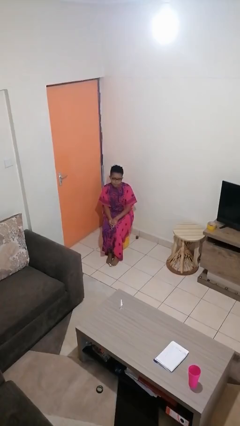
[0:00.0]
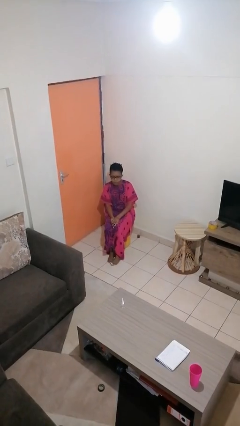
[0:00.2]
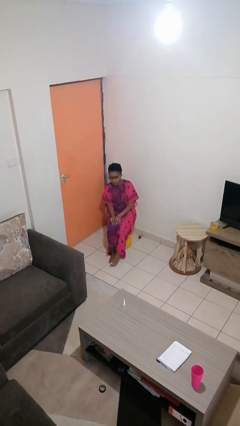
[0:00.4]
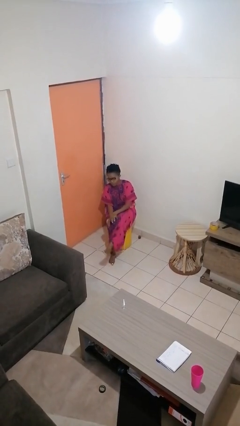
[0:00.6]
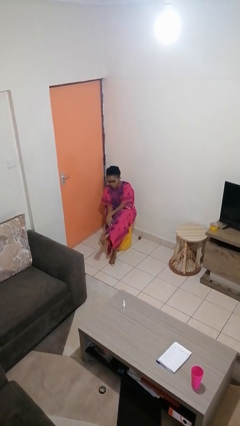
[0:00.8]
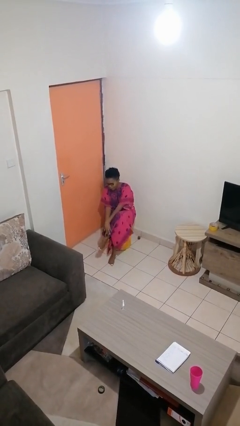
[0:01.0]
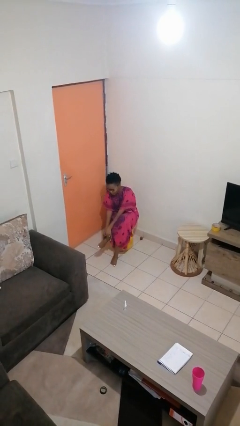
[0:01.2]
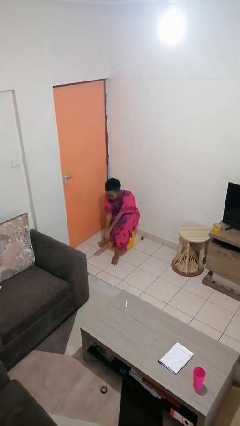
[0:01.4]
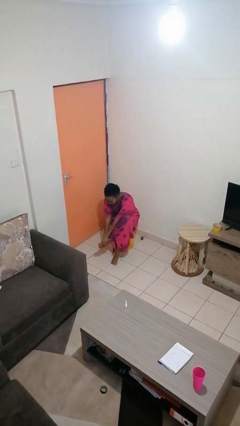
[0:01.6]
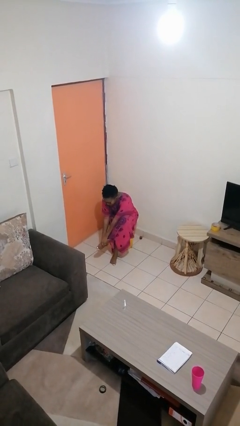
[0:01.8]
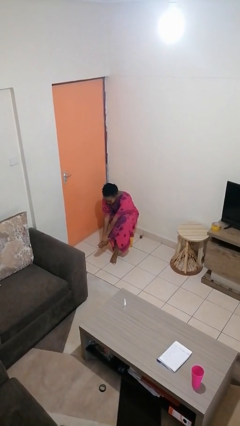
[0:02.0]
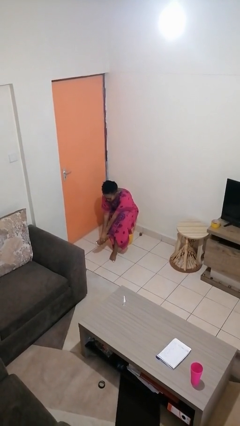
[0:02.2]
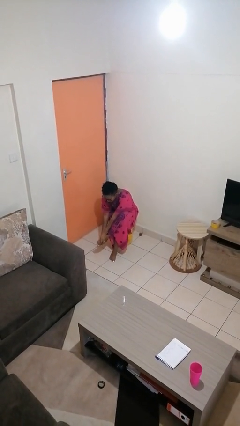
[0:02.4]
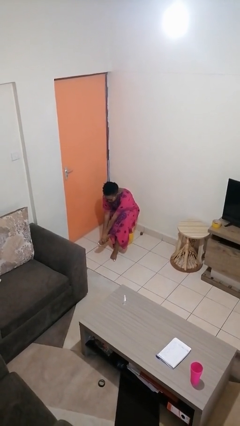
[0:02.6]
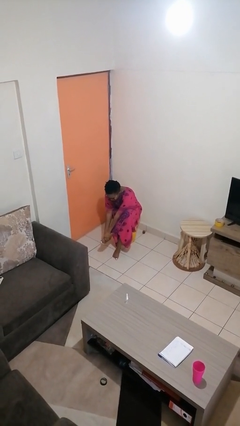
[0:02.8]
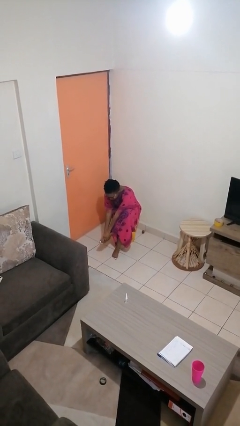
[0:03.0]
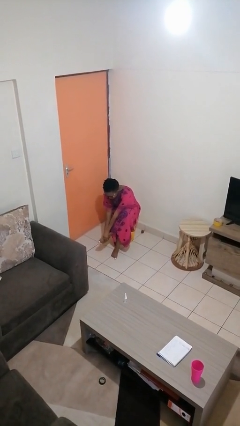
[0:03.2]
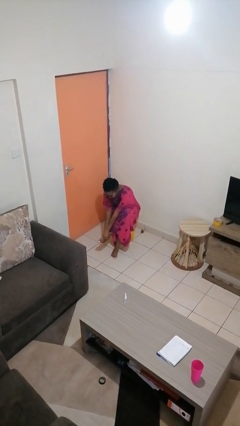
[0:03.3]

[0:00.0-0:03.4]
person rubs foot

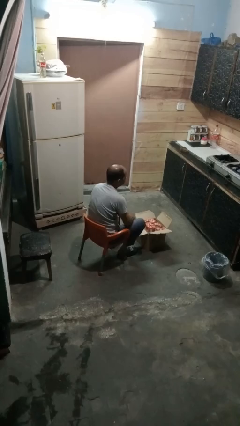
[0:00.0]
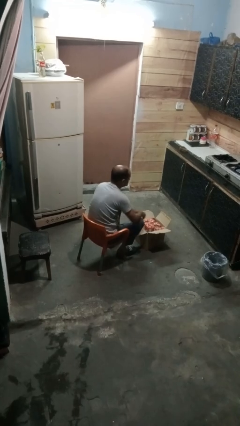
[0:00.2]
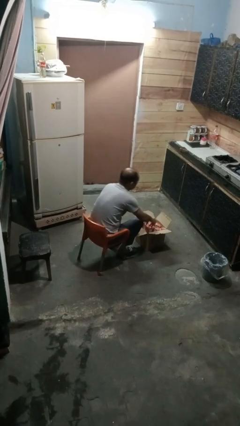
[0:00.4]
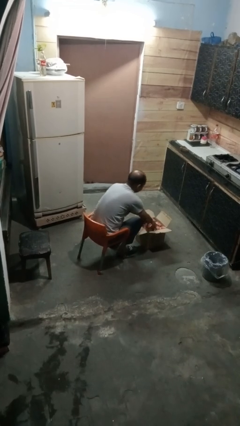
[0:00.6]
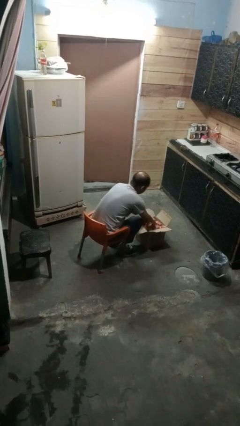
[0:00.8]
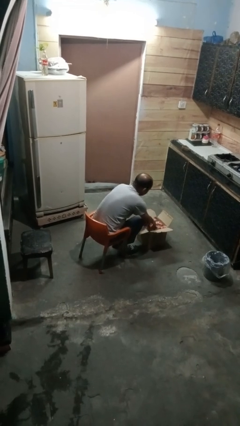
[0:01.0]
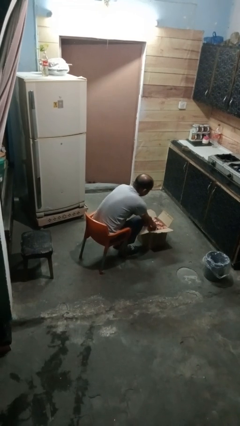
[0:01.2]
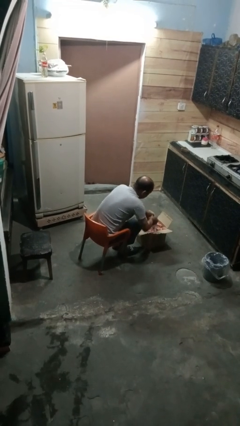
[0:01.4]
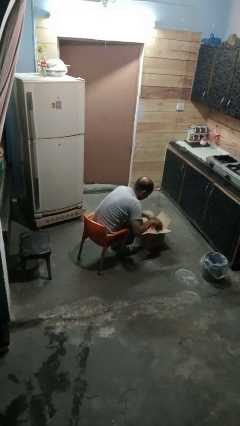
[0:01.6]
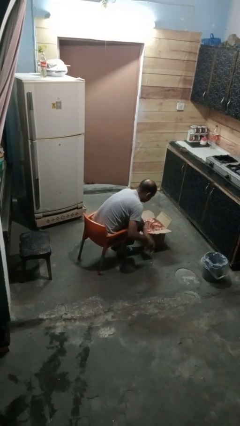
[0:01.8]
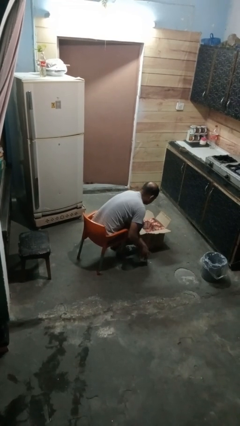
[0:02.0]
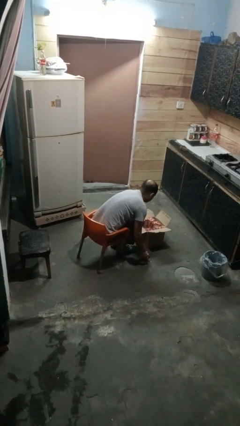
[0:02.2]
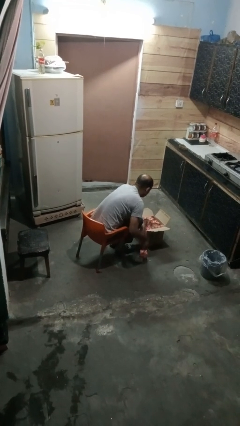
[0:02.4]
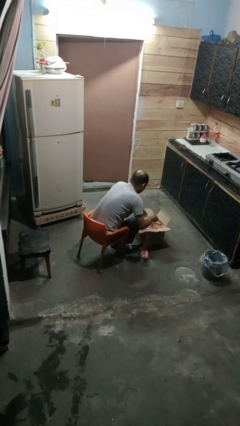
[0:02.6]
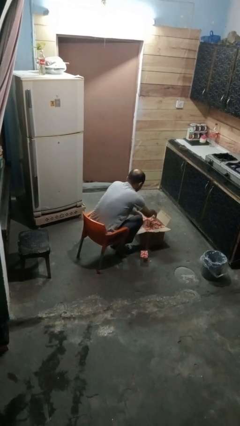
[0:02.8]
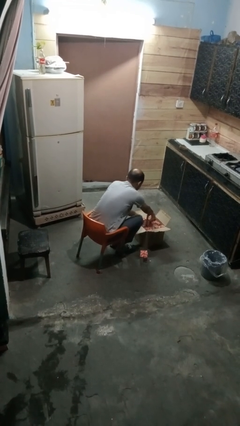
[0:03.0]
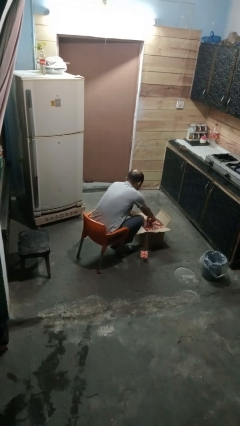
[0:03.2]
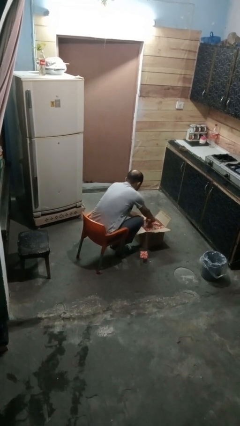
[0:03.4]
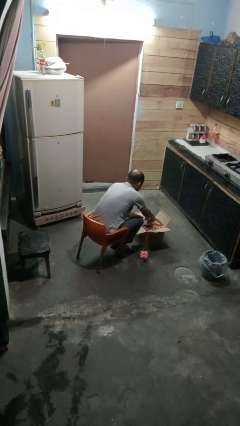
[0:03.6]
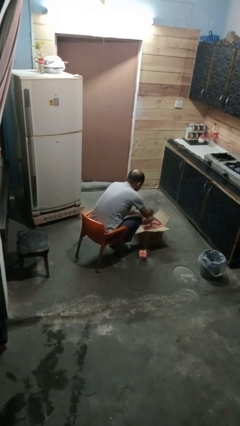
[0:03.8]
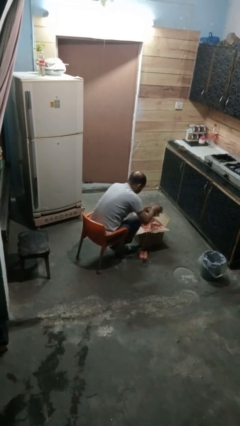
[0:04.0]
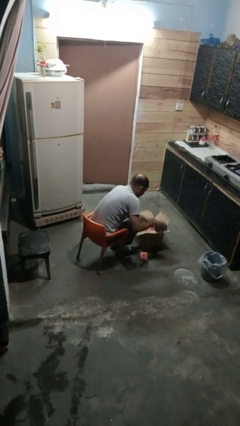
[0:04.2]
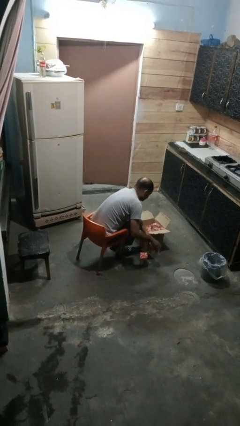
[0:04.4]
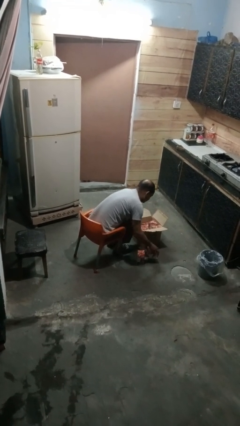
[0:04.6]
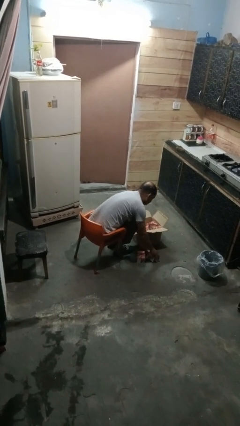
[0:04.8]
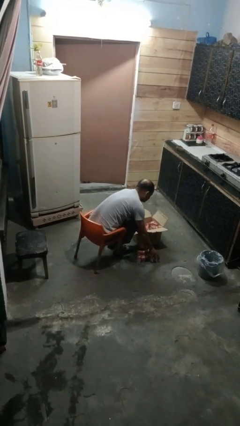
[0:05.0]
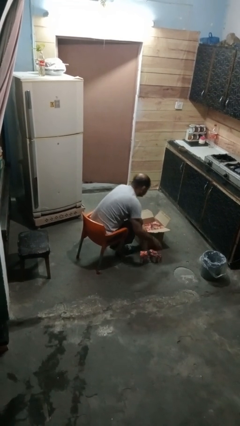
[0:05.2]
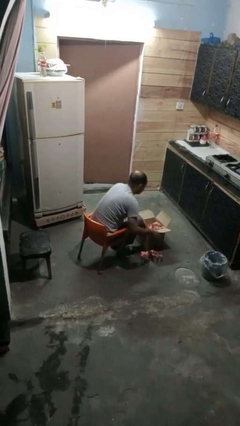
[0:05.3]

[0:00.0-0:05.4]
person takes object from box

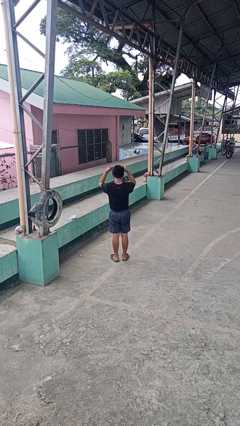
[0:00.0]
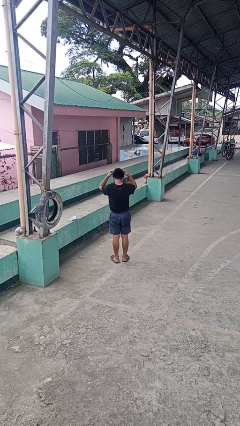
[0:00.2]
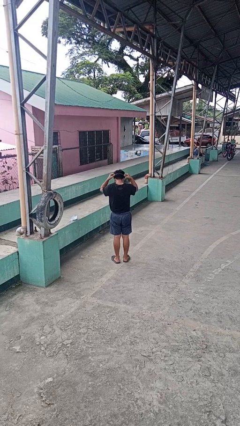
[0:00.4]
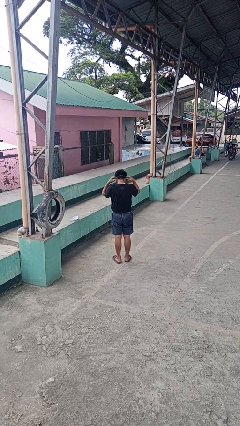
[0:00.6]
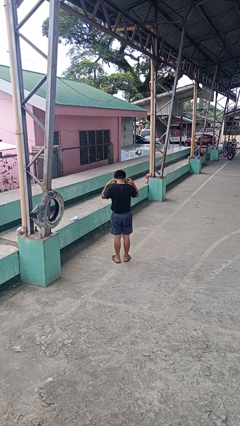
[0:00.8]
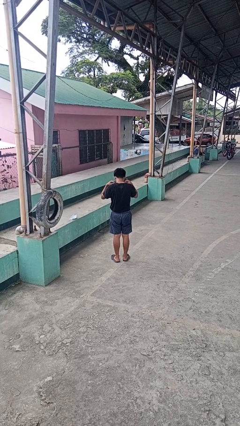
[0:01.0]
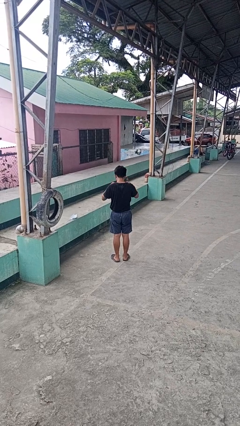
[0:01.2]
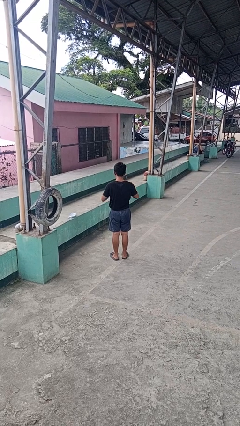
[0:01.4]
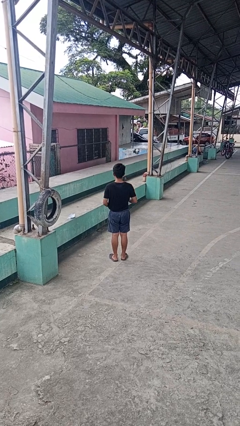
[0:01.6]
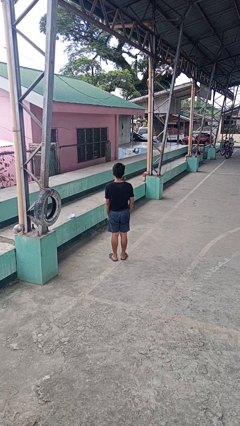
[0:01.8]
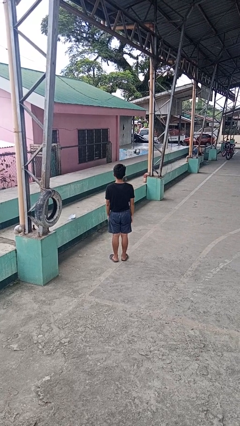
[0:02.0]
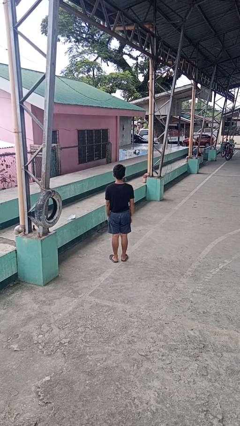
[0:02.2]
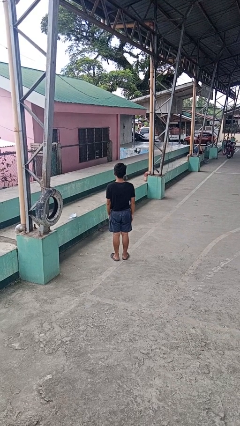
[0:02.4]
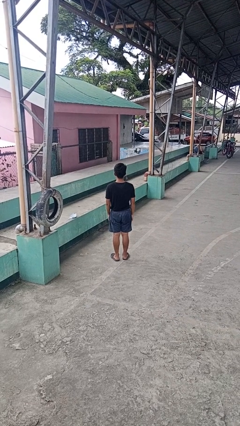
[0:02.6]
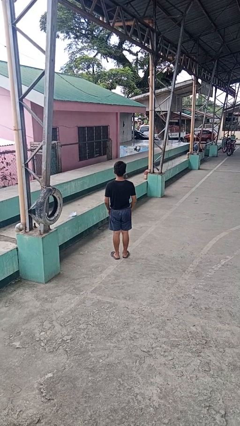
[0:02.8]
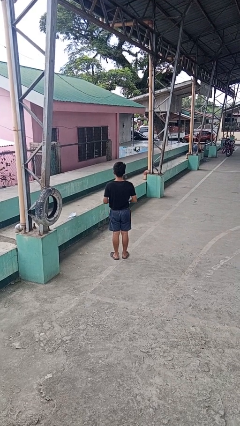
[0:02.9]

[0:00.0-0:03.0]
person puts on necklace

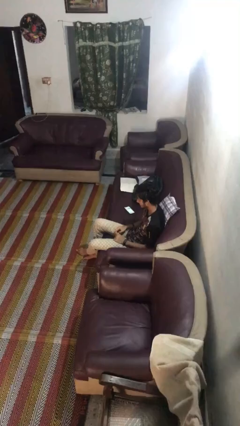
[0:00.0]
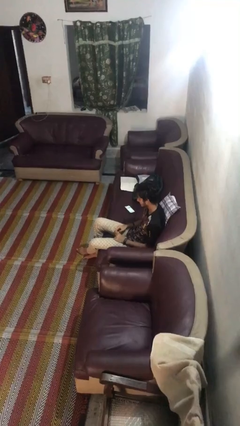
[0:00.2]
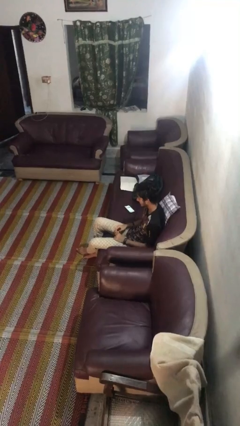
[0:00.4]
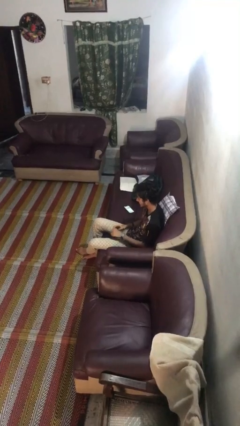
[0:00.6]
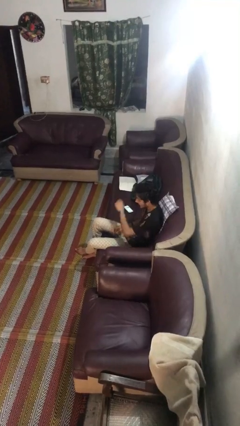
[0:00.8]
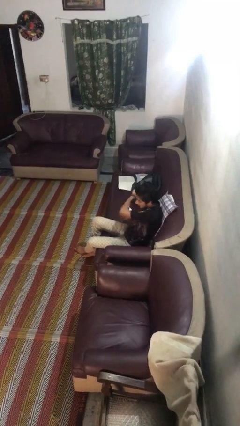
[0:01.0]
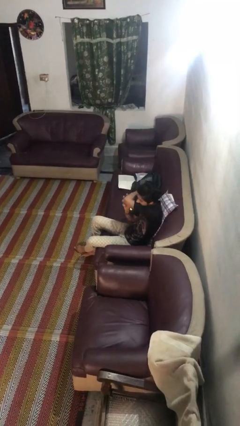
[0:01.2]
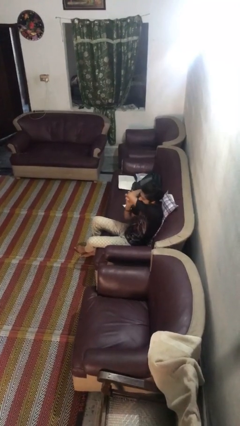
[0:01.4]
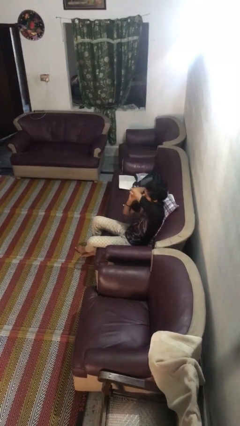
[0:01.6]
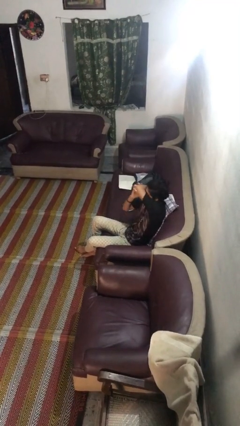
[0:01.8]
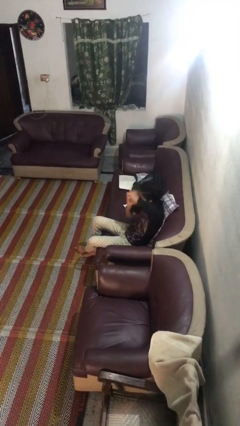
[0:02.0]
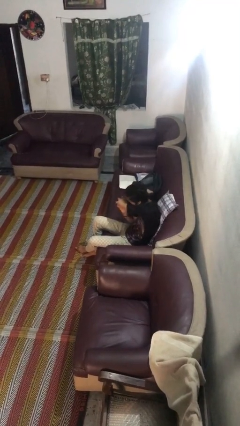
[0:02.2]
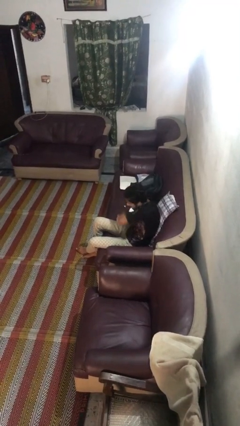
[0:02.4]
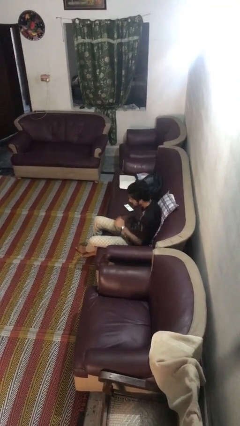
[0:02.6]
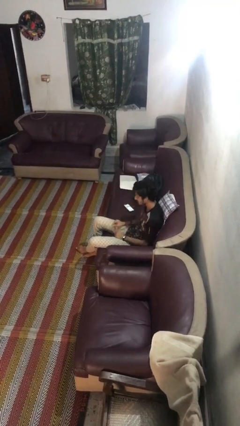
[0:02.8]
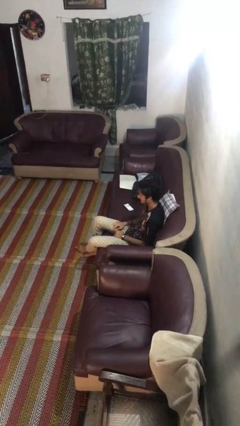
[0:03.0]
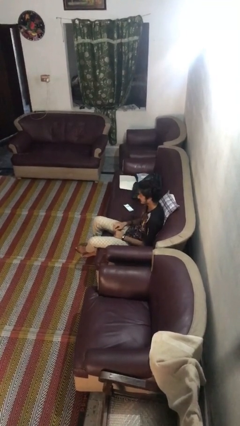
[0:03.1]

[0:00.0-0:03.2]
person sneezes into arm

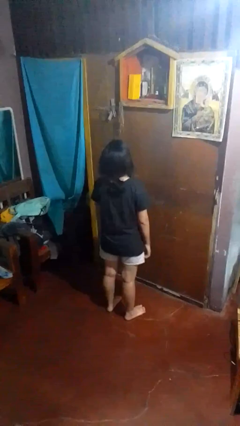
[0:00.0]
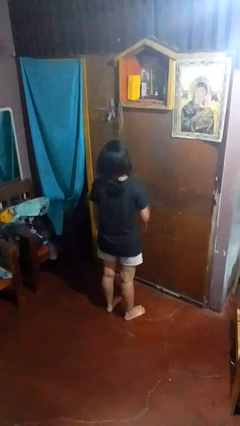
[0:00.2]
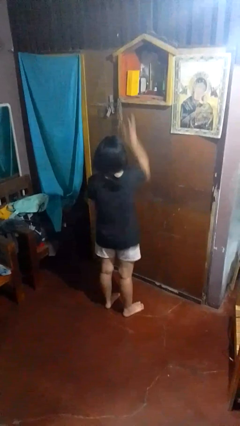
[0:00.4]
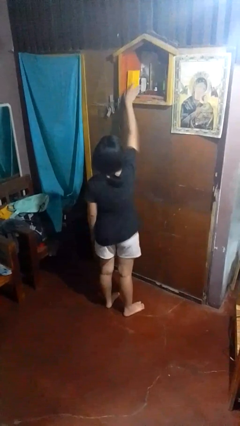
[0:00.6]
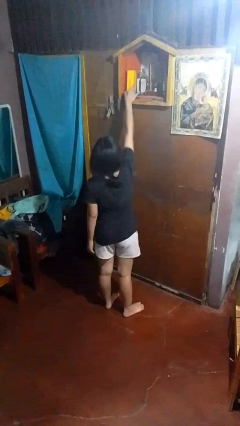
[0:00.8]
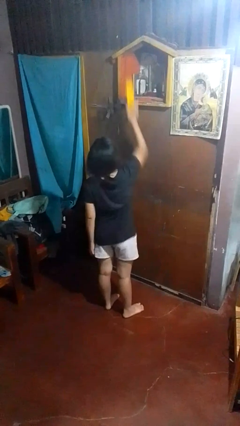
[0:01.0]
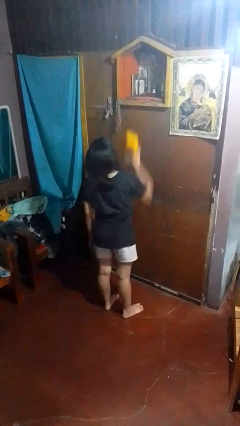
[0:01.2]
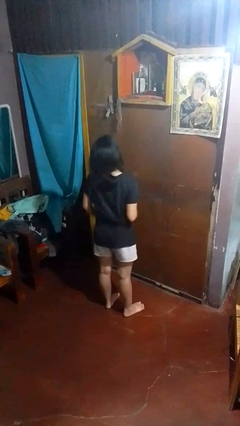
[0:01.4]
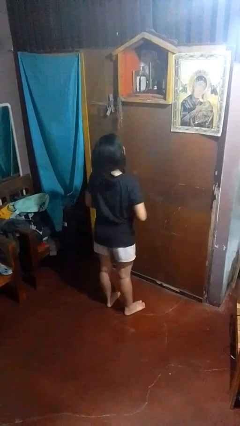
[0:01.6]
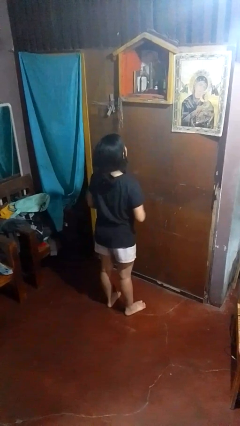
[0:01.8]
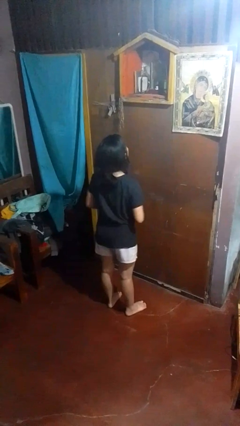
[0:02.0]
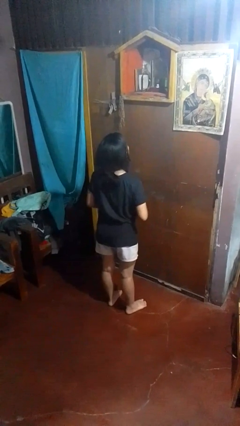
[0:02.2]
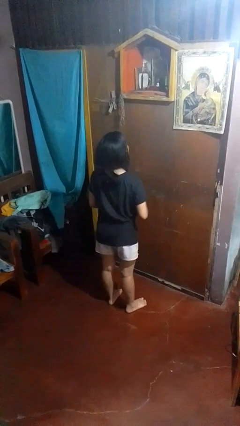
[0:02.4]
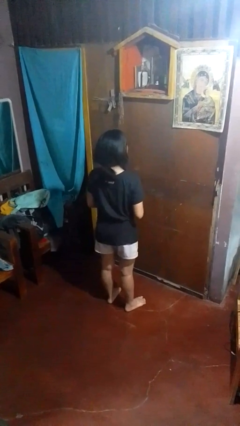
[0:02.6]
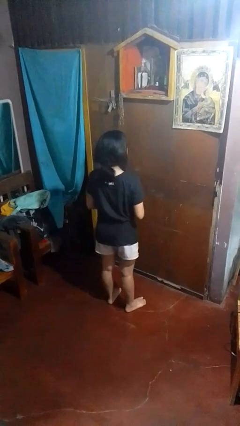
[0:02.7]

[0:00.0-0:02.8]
person picks up object from shelf
